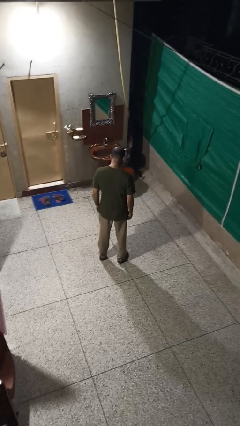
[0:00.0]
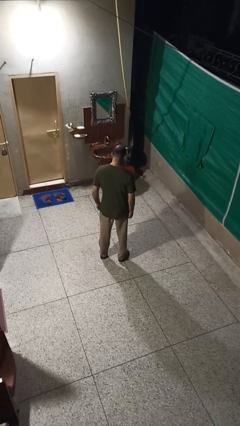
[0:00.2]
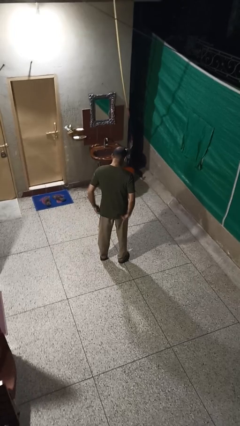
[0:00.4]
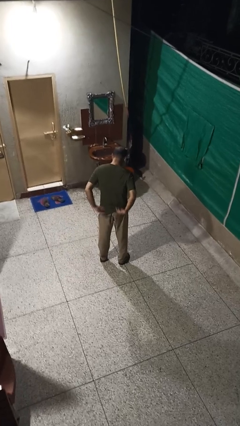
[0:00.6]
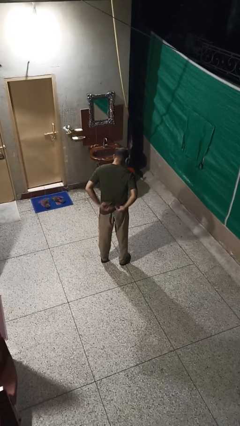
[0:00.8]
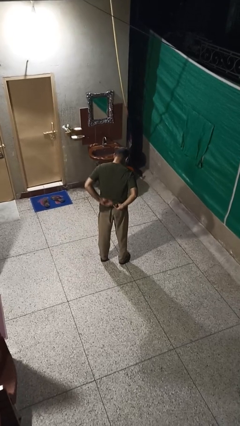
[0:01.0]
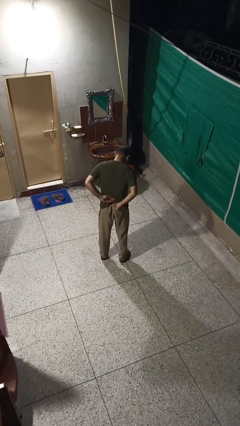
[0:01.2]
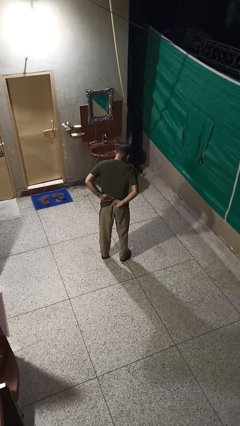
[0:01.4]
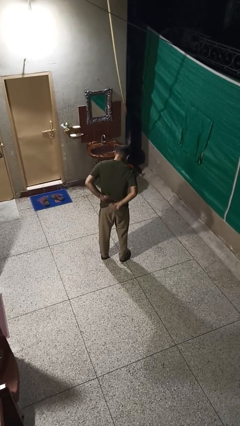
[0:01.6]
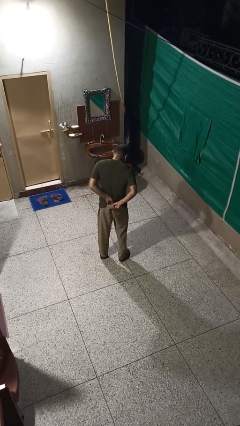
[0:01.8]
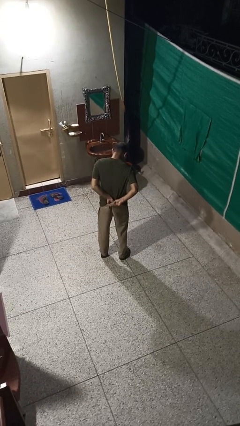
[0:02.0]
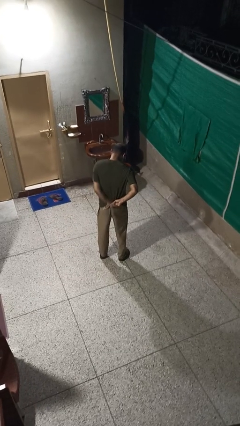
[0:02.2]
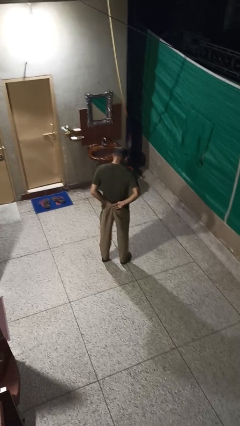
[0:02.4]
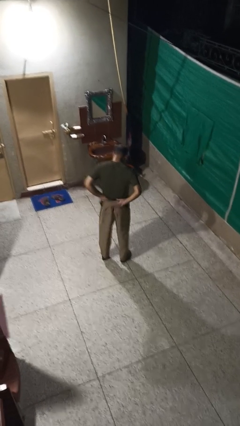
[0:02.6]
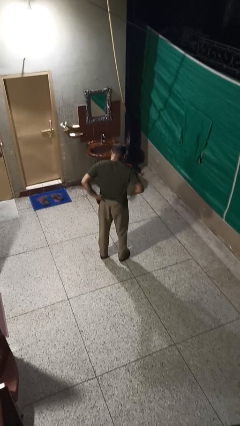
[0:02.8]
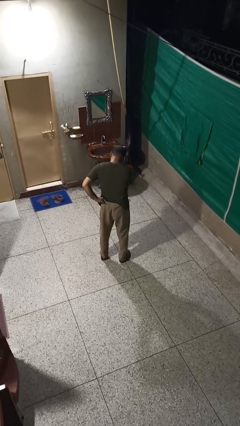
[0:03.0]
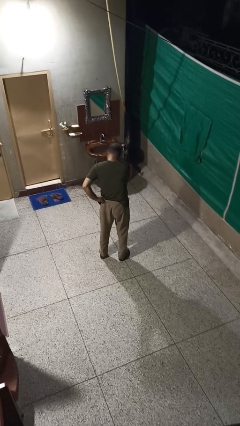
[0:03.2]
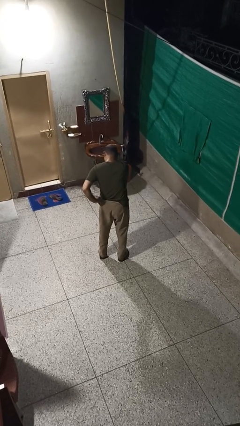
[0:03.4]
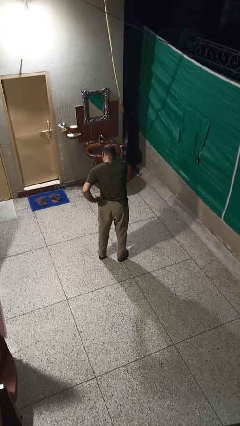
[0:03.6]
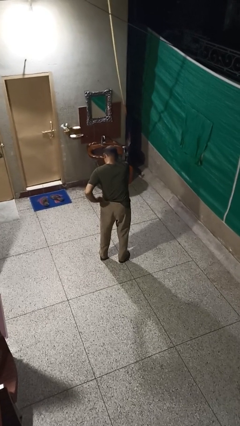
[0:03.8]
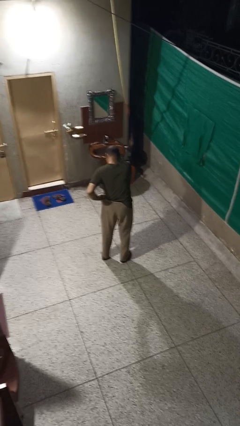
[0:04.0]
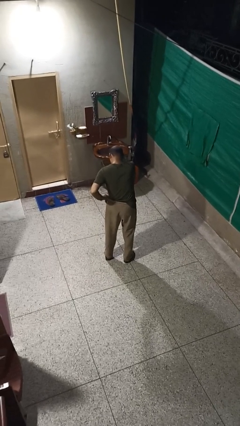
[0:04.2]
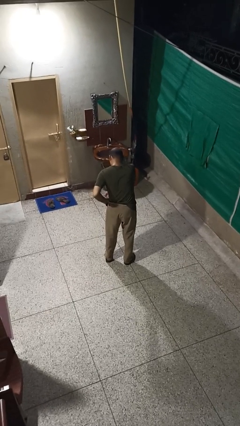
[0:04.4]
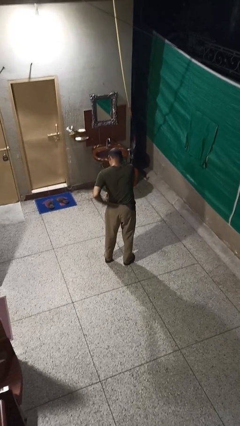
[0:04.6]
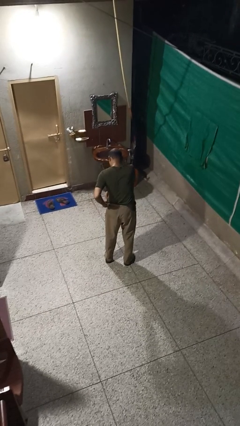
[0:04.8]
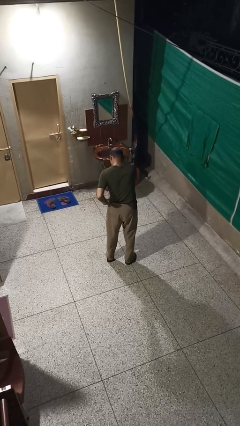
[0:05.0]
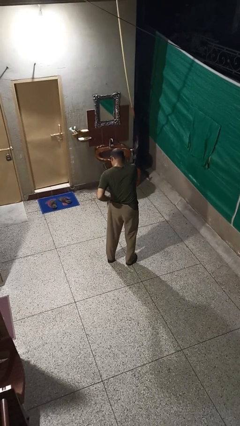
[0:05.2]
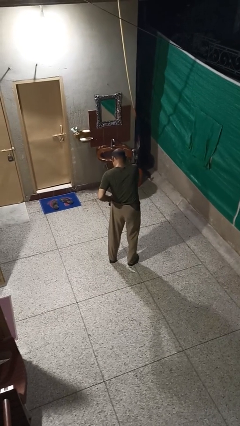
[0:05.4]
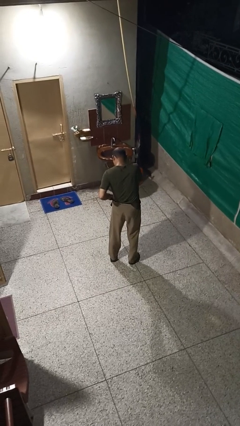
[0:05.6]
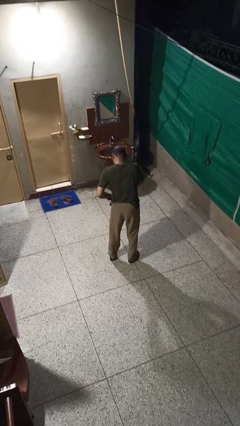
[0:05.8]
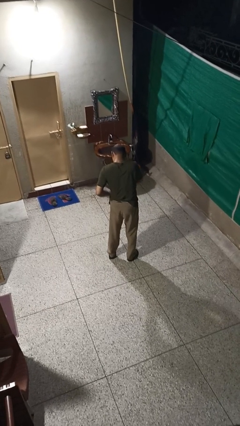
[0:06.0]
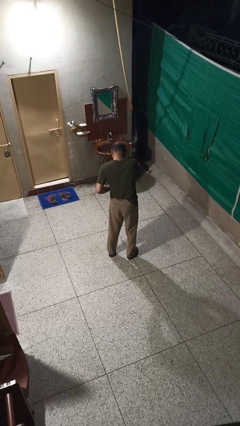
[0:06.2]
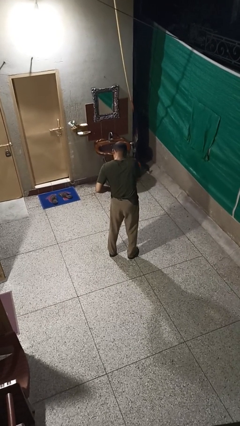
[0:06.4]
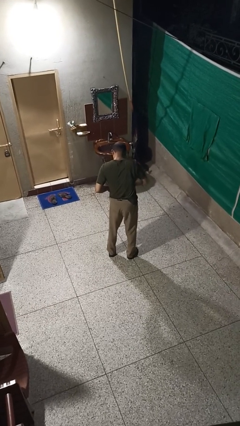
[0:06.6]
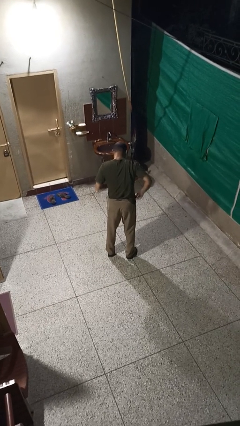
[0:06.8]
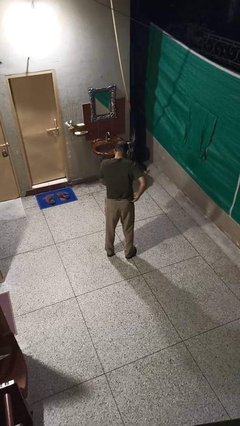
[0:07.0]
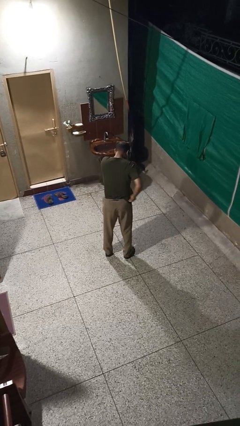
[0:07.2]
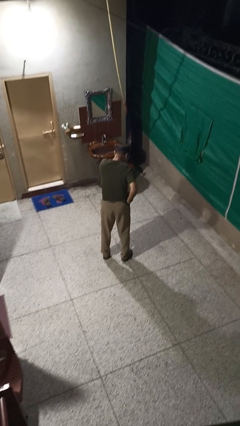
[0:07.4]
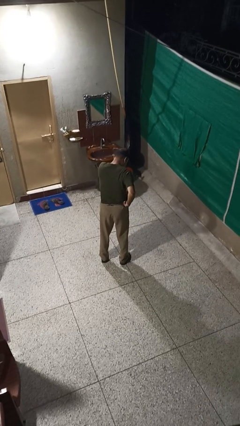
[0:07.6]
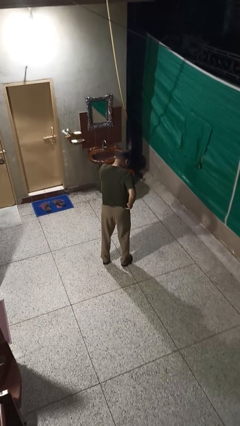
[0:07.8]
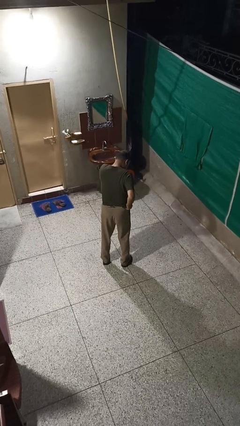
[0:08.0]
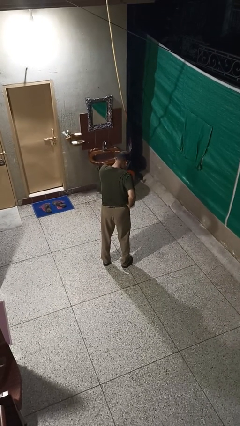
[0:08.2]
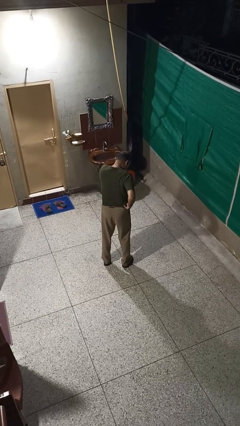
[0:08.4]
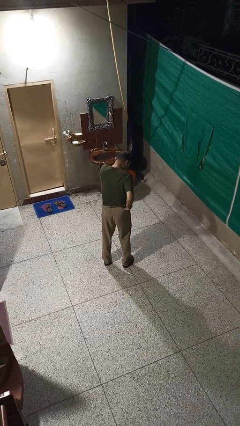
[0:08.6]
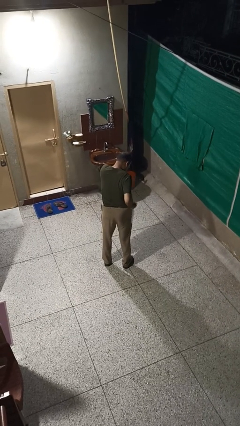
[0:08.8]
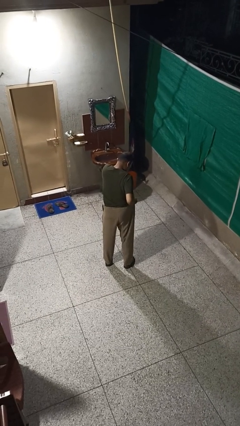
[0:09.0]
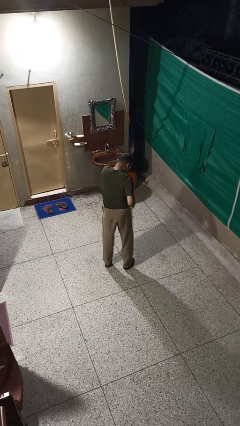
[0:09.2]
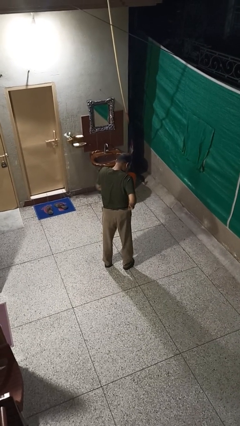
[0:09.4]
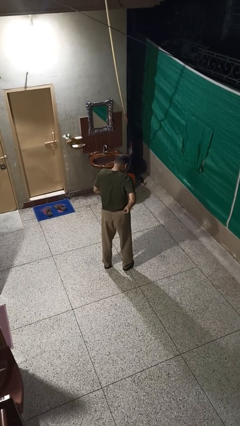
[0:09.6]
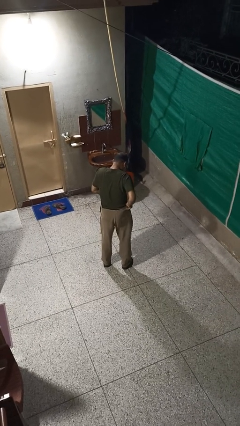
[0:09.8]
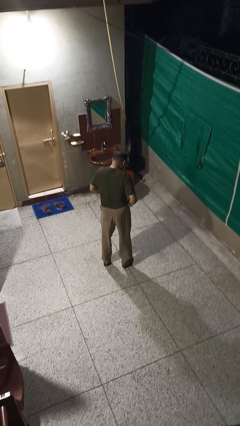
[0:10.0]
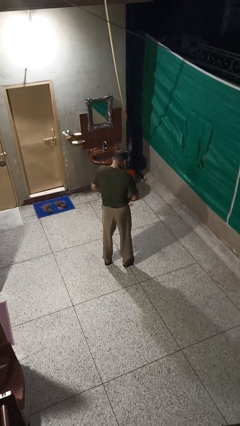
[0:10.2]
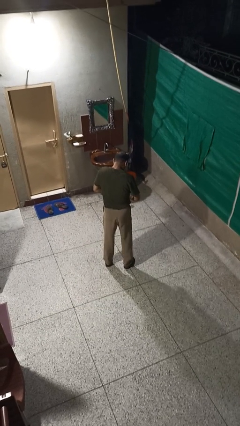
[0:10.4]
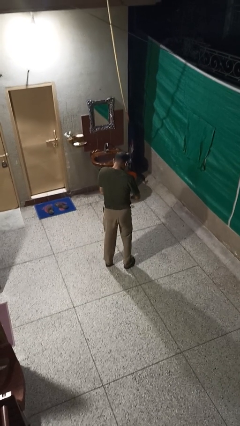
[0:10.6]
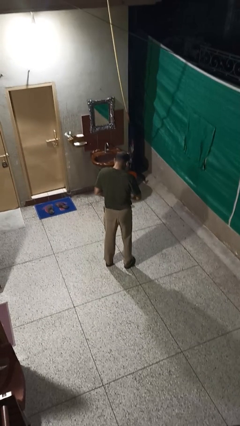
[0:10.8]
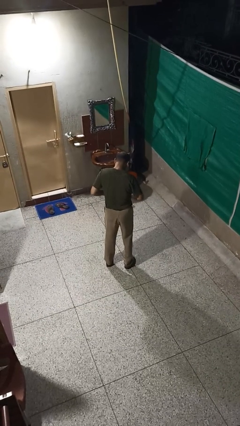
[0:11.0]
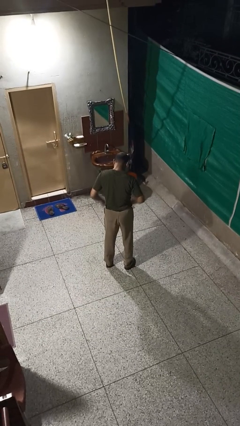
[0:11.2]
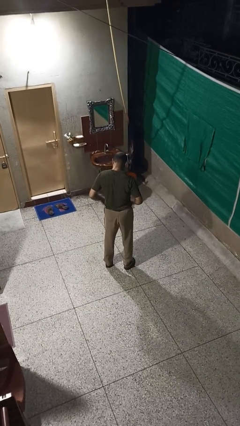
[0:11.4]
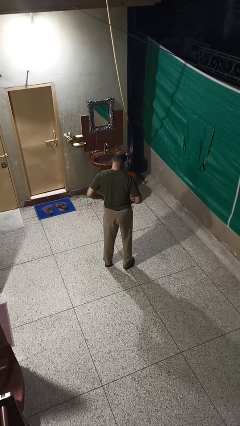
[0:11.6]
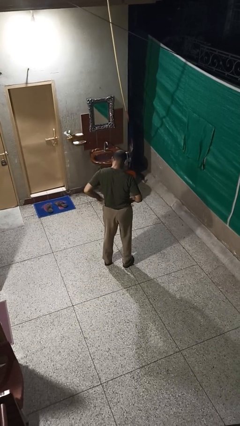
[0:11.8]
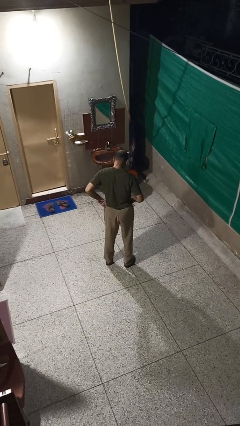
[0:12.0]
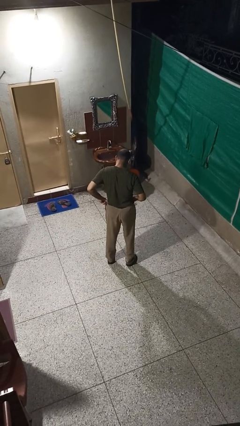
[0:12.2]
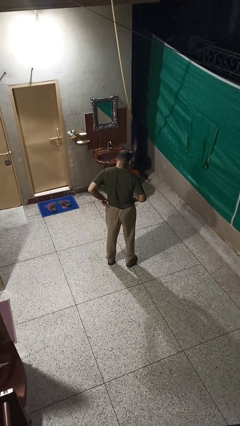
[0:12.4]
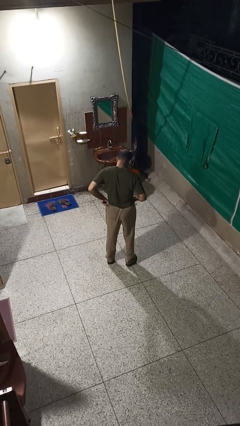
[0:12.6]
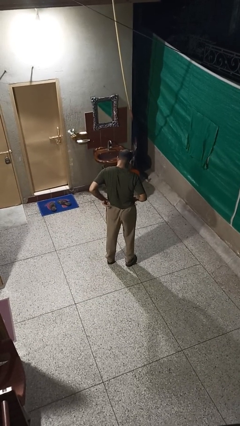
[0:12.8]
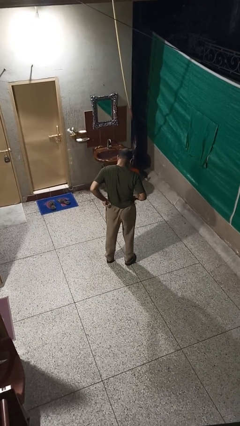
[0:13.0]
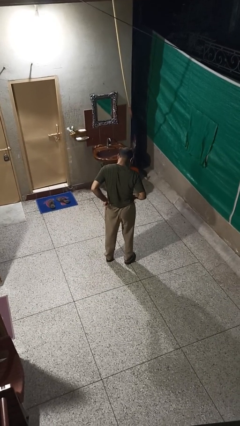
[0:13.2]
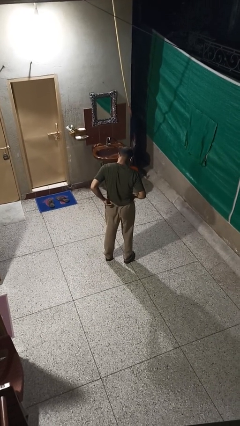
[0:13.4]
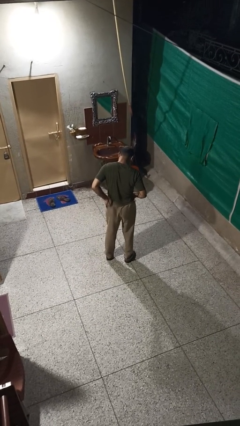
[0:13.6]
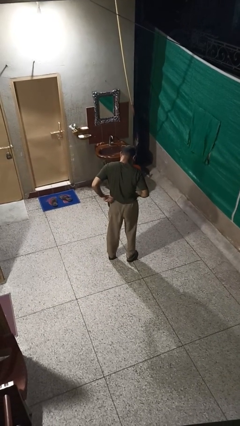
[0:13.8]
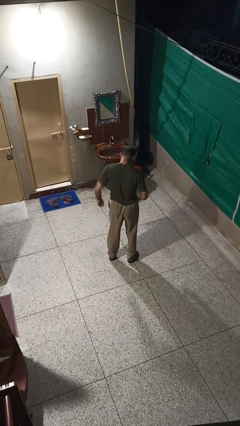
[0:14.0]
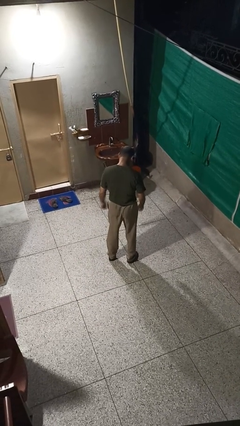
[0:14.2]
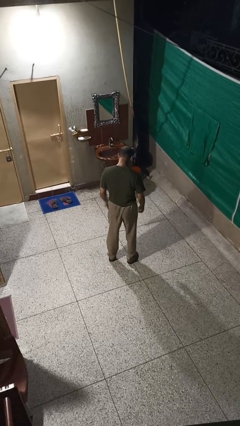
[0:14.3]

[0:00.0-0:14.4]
person tucks in shirt

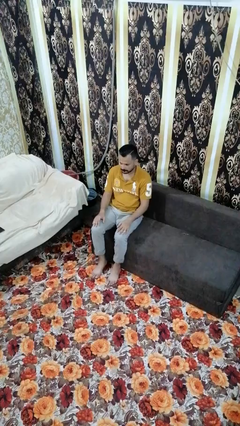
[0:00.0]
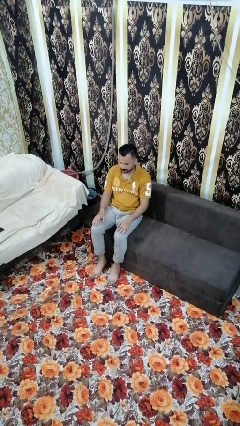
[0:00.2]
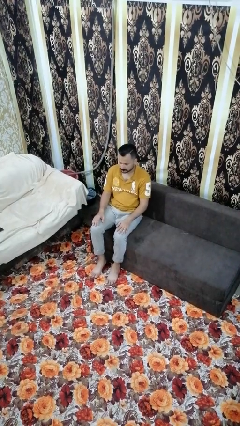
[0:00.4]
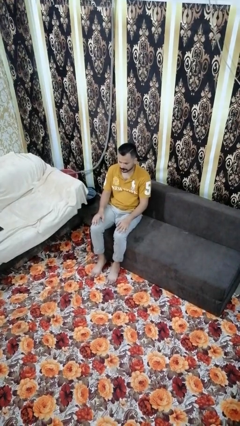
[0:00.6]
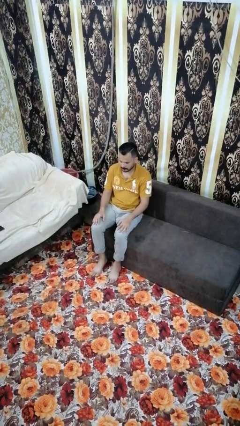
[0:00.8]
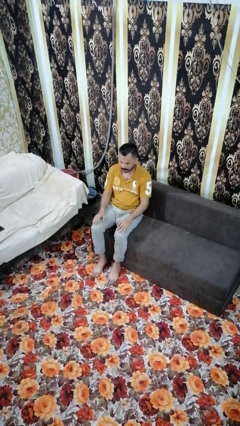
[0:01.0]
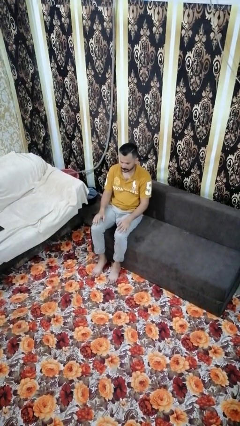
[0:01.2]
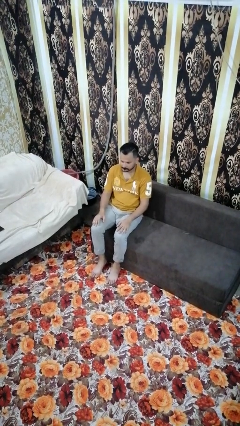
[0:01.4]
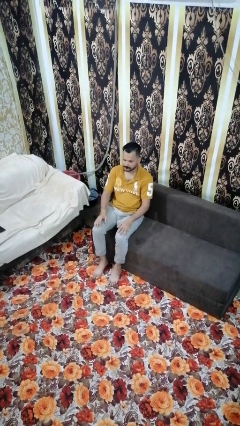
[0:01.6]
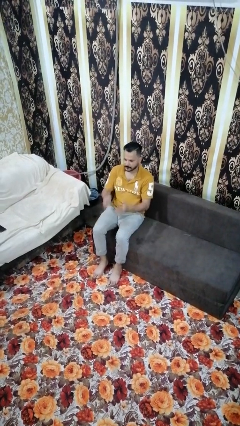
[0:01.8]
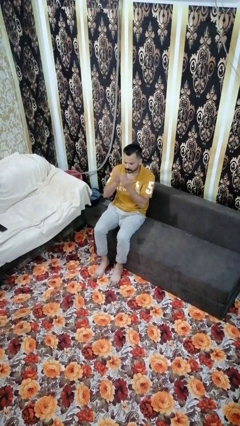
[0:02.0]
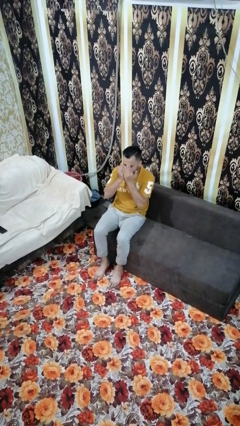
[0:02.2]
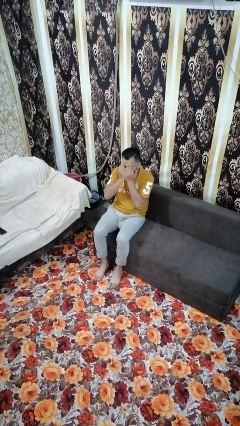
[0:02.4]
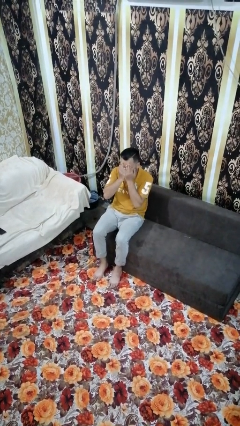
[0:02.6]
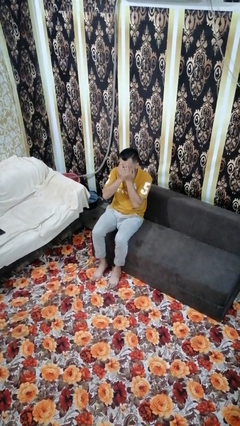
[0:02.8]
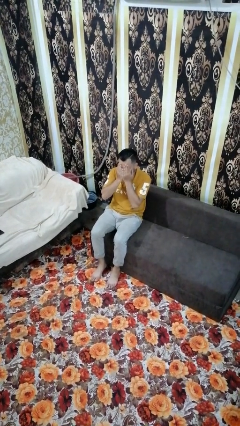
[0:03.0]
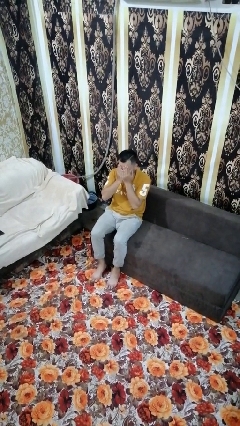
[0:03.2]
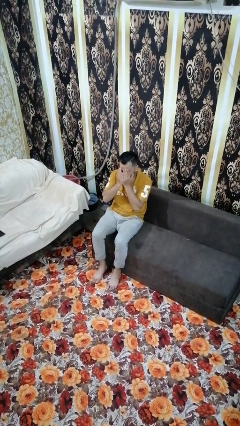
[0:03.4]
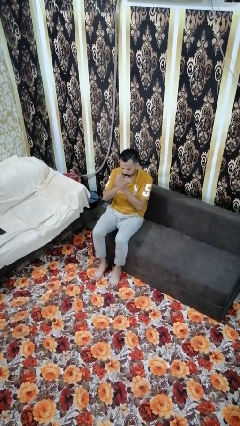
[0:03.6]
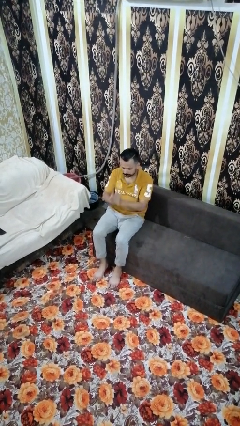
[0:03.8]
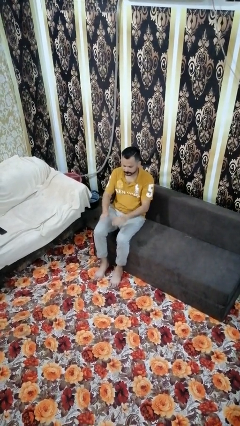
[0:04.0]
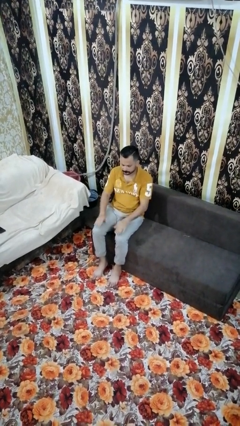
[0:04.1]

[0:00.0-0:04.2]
person covers face with hands
